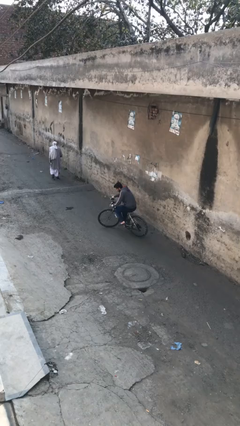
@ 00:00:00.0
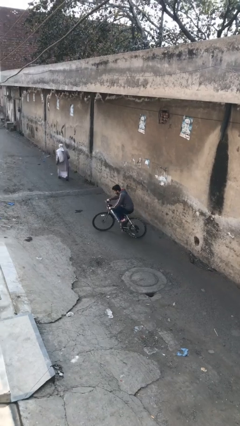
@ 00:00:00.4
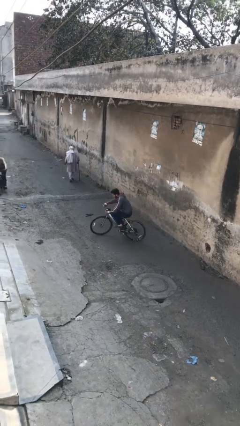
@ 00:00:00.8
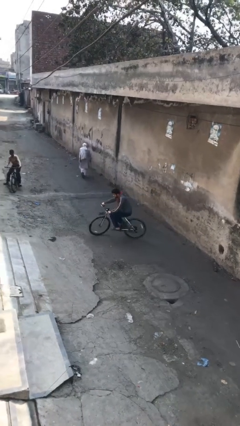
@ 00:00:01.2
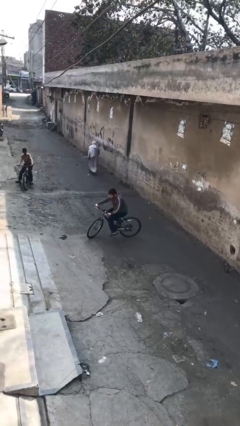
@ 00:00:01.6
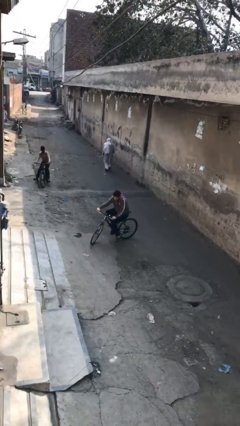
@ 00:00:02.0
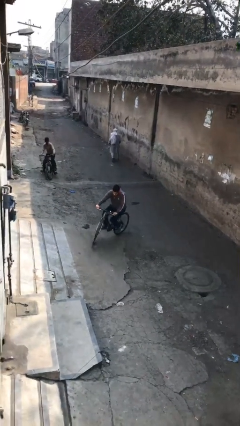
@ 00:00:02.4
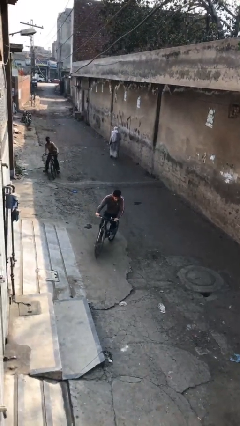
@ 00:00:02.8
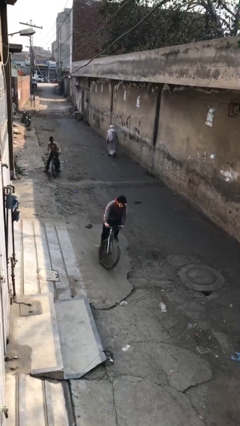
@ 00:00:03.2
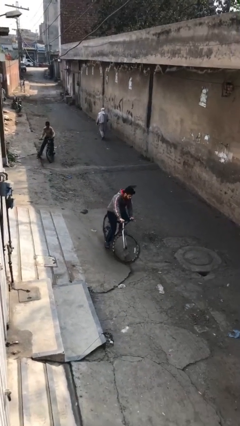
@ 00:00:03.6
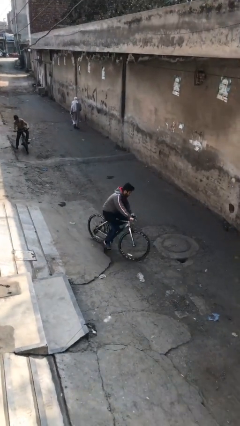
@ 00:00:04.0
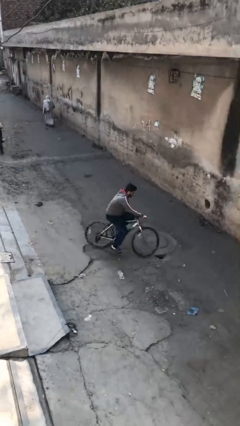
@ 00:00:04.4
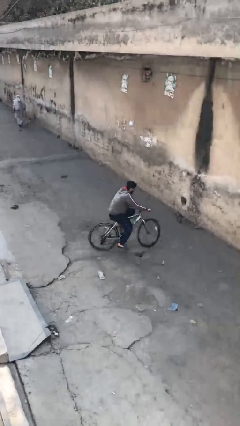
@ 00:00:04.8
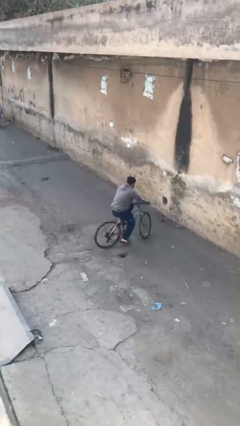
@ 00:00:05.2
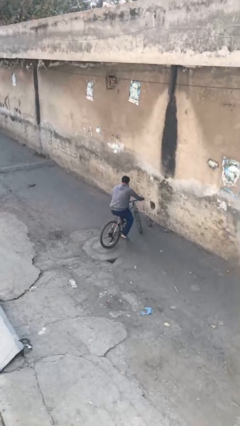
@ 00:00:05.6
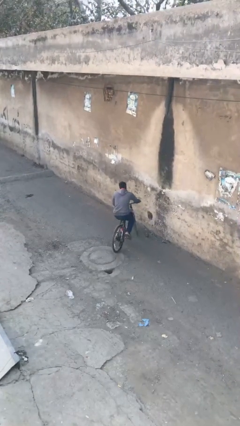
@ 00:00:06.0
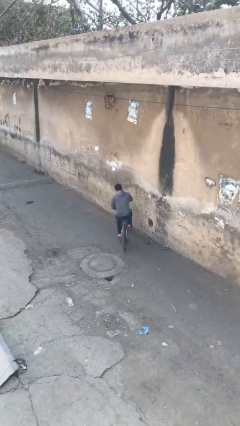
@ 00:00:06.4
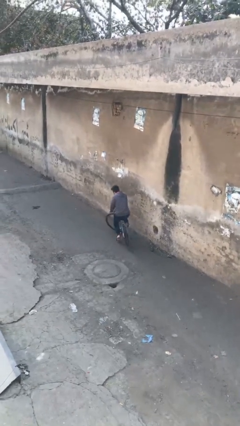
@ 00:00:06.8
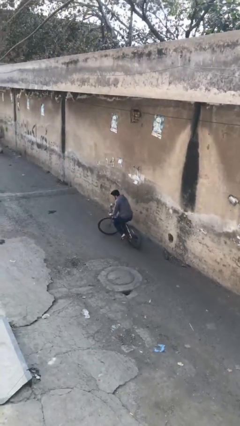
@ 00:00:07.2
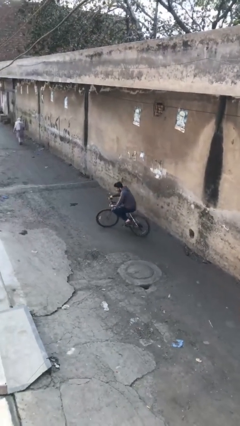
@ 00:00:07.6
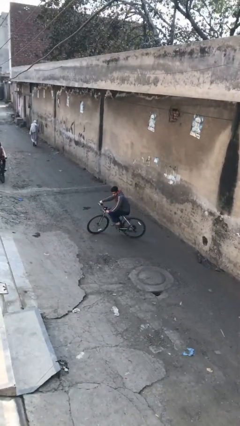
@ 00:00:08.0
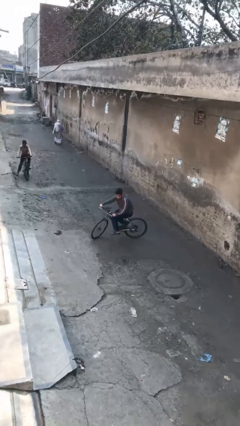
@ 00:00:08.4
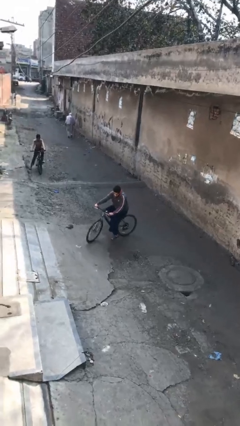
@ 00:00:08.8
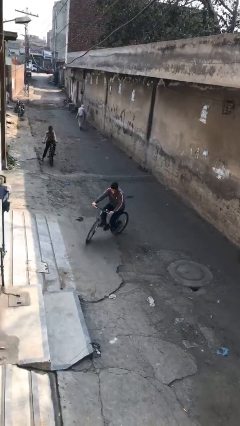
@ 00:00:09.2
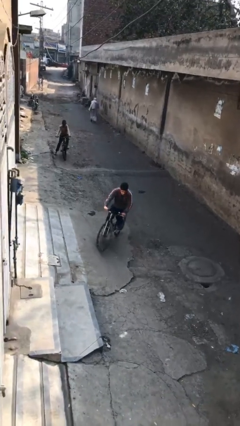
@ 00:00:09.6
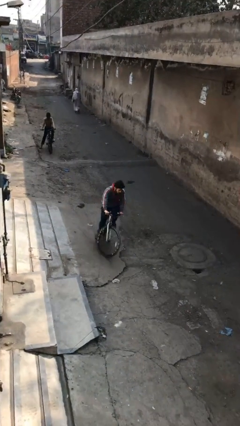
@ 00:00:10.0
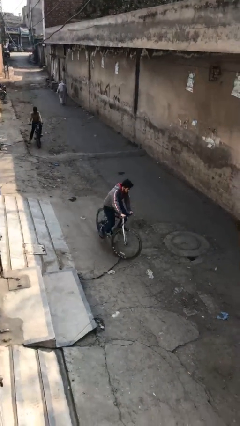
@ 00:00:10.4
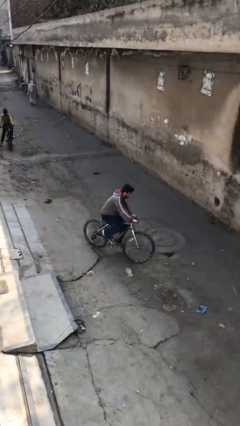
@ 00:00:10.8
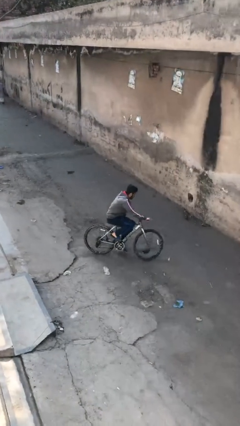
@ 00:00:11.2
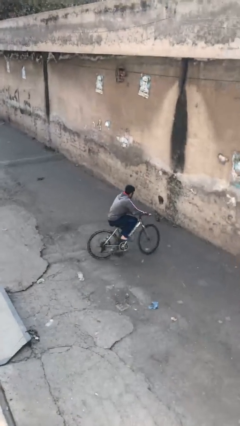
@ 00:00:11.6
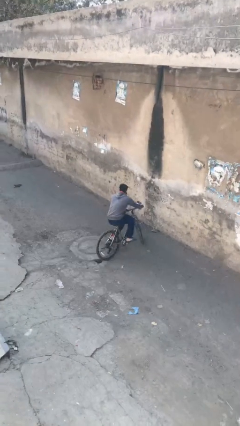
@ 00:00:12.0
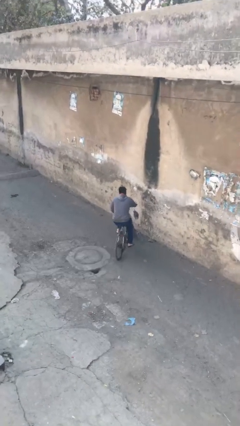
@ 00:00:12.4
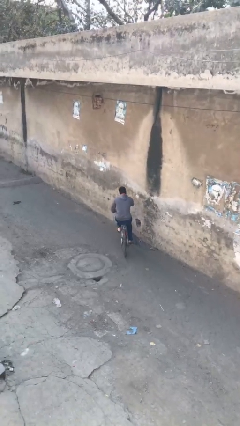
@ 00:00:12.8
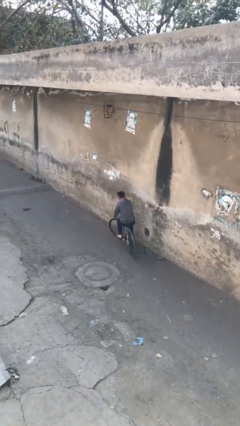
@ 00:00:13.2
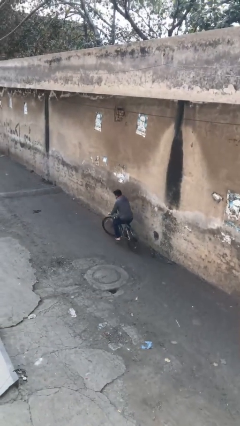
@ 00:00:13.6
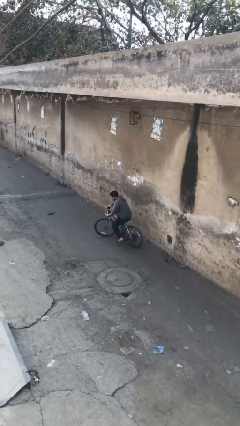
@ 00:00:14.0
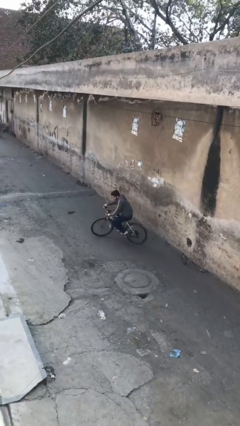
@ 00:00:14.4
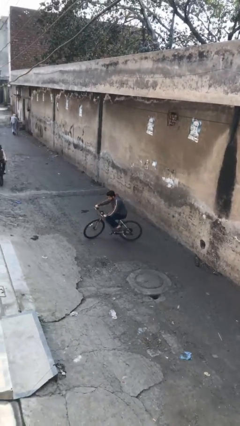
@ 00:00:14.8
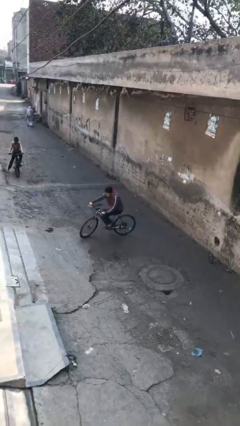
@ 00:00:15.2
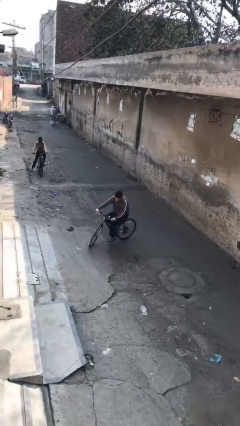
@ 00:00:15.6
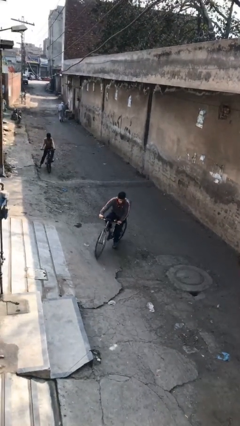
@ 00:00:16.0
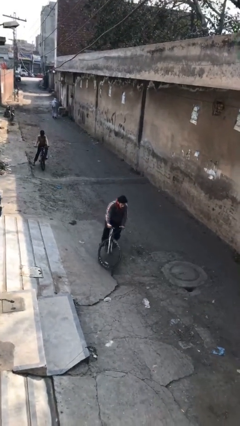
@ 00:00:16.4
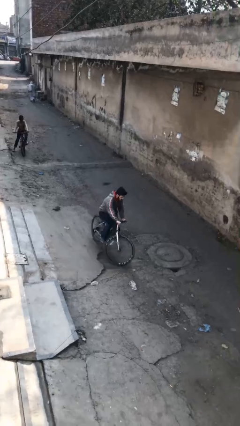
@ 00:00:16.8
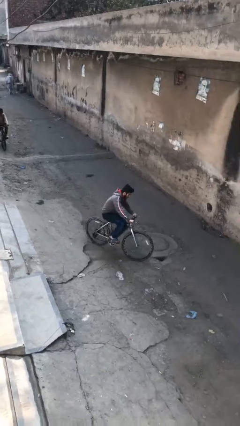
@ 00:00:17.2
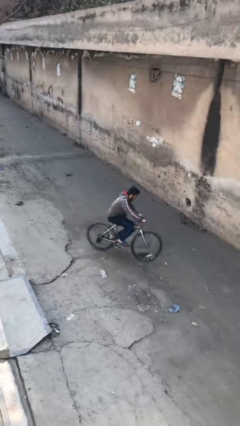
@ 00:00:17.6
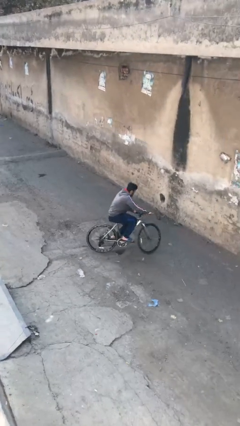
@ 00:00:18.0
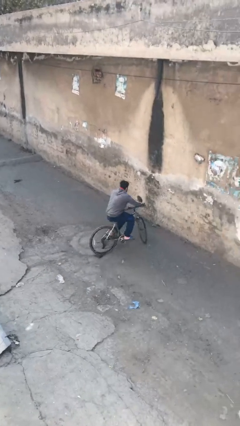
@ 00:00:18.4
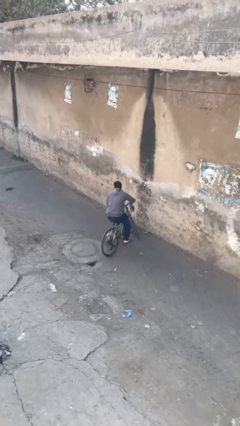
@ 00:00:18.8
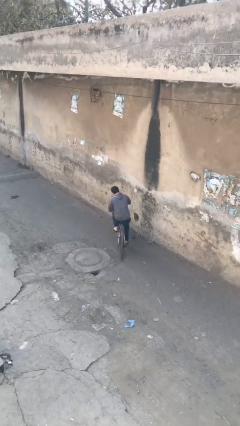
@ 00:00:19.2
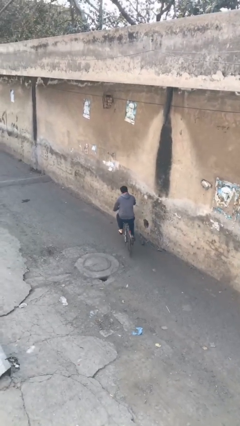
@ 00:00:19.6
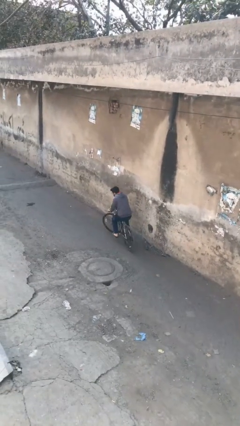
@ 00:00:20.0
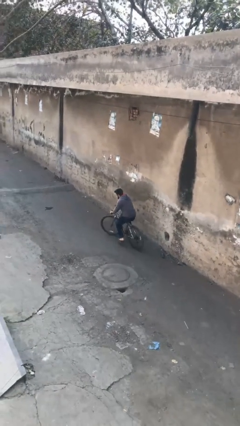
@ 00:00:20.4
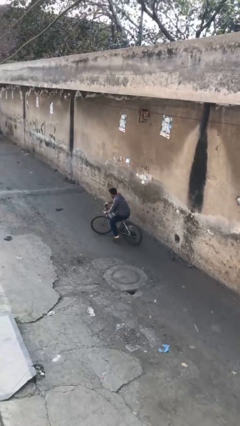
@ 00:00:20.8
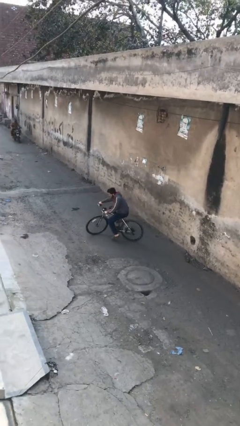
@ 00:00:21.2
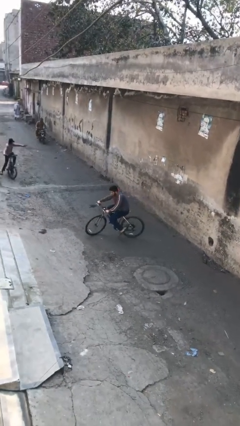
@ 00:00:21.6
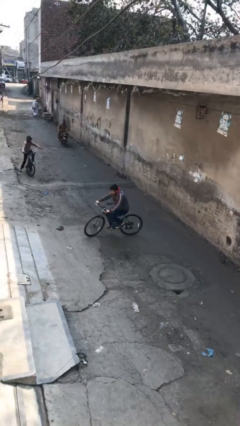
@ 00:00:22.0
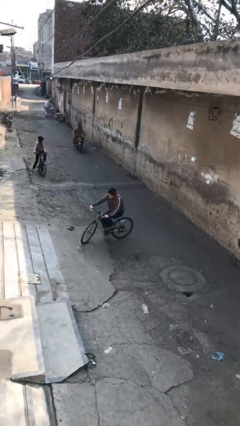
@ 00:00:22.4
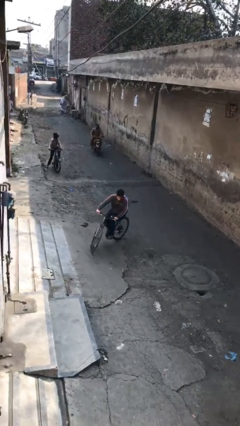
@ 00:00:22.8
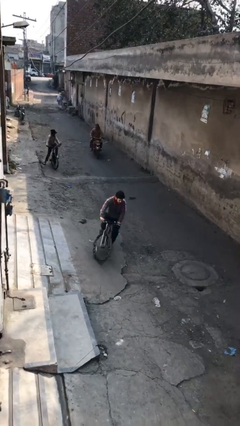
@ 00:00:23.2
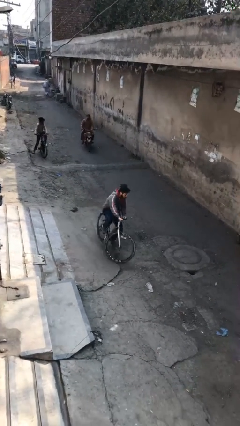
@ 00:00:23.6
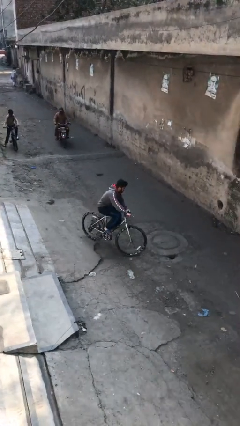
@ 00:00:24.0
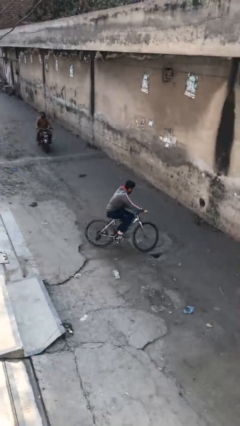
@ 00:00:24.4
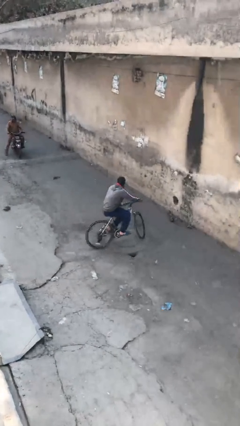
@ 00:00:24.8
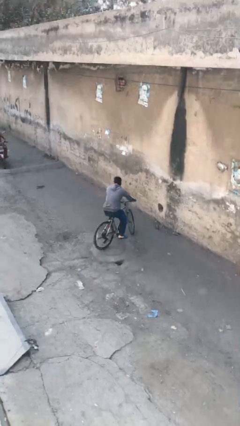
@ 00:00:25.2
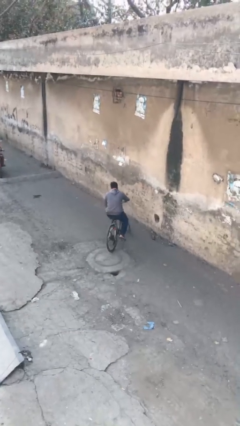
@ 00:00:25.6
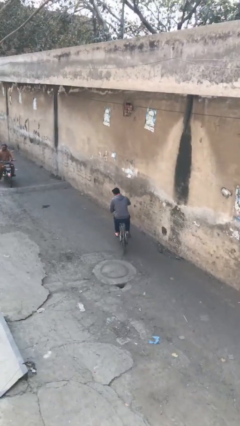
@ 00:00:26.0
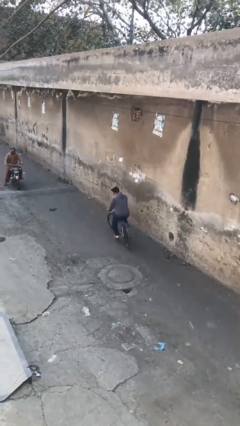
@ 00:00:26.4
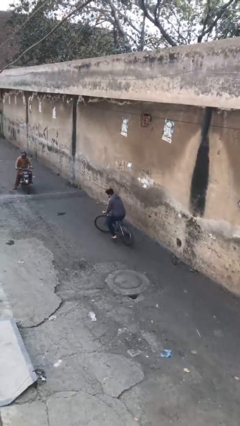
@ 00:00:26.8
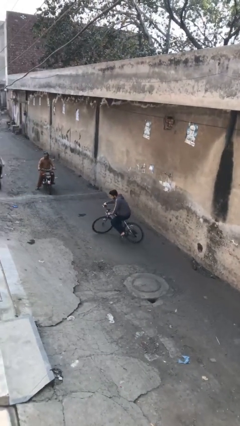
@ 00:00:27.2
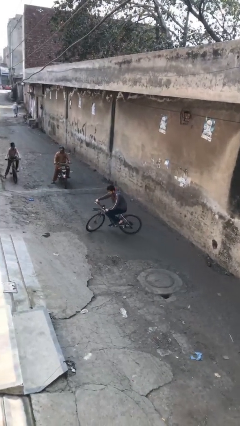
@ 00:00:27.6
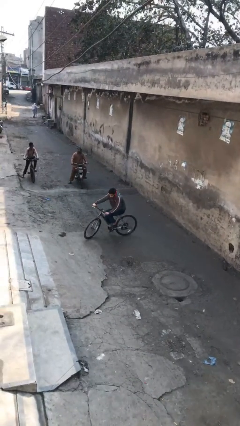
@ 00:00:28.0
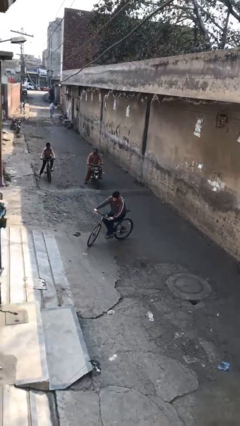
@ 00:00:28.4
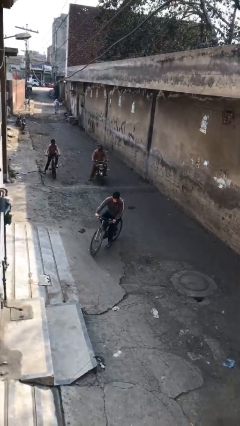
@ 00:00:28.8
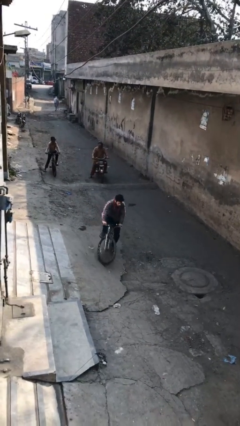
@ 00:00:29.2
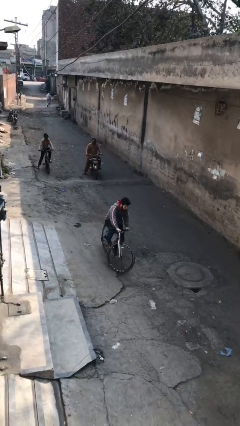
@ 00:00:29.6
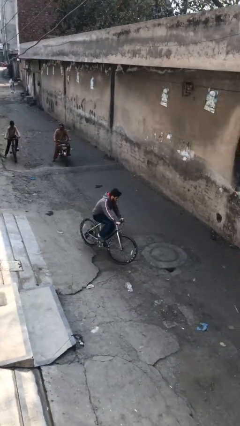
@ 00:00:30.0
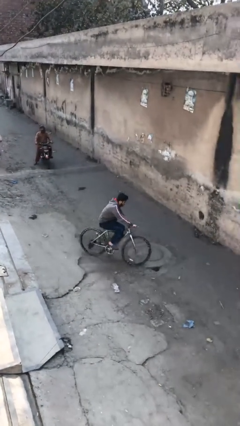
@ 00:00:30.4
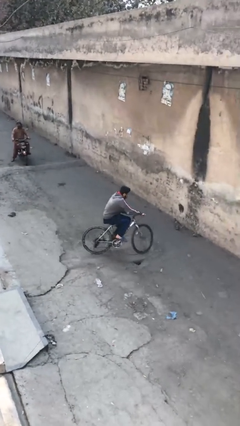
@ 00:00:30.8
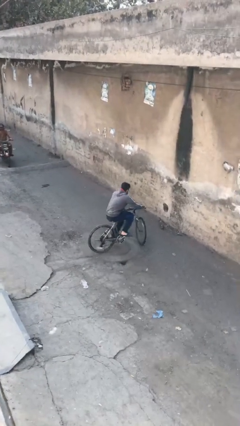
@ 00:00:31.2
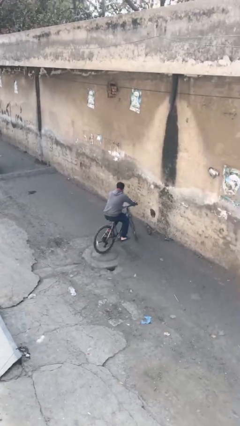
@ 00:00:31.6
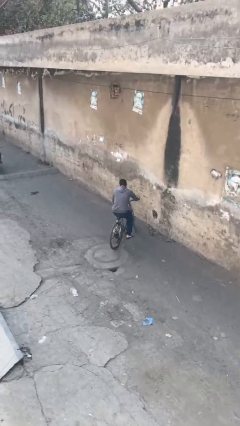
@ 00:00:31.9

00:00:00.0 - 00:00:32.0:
person rides bicycle

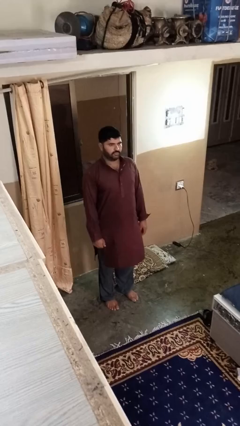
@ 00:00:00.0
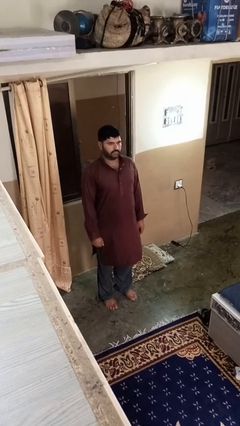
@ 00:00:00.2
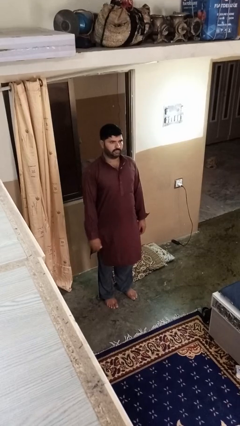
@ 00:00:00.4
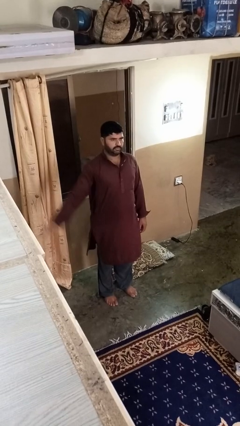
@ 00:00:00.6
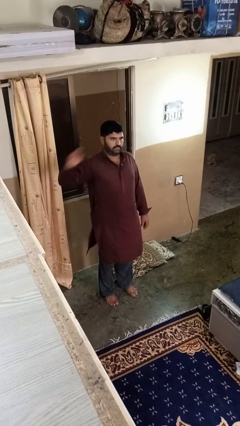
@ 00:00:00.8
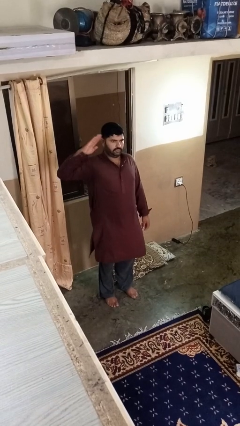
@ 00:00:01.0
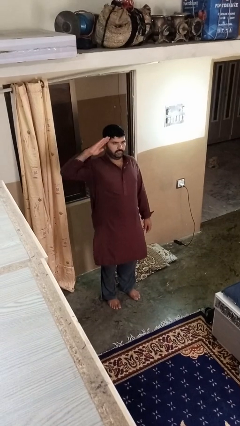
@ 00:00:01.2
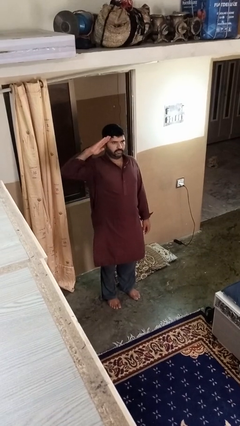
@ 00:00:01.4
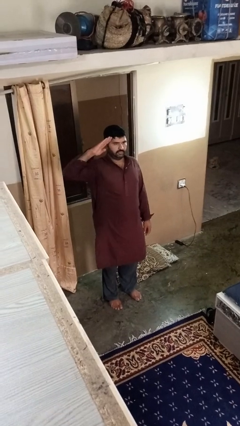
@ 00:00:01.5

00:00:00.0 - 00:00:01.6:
person salutes

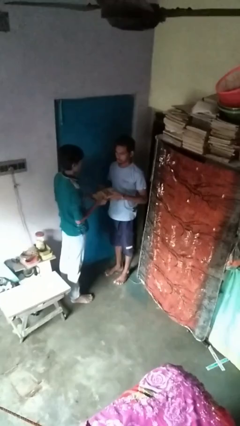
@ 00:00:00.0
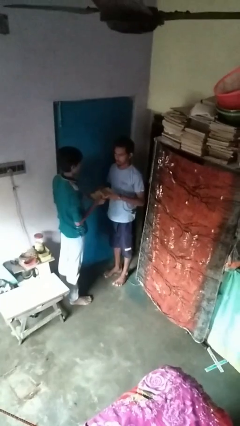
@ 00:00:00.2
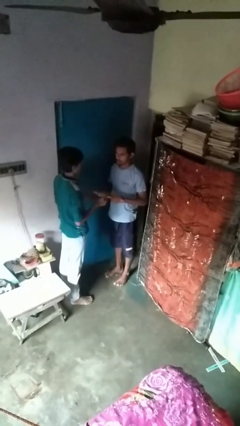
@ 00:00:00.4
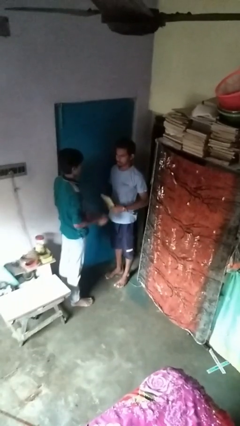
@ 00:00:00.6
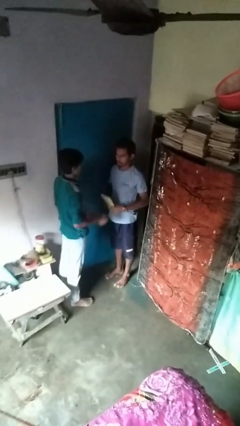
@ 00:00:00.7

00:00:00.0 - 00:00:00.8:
person transfers object to person
